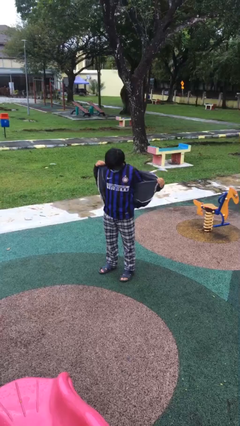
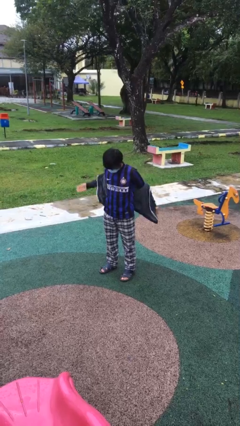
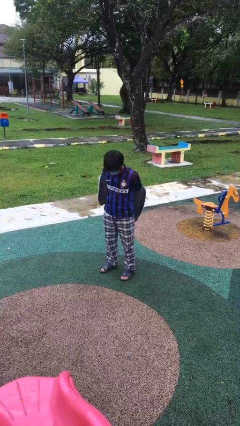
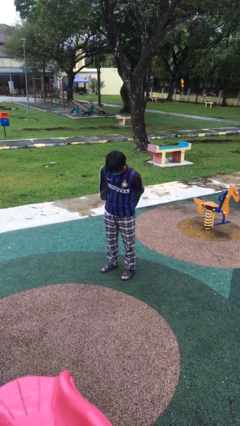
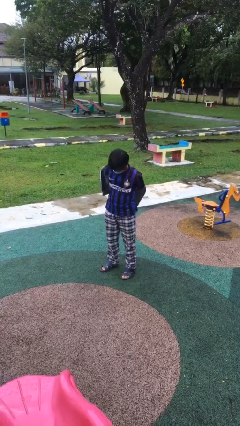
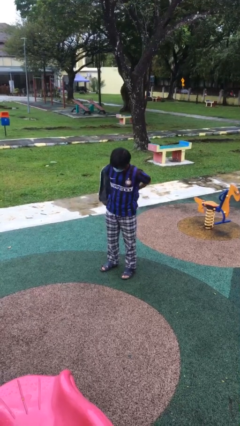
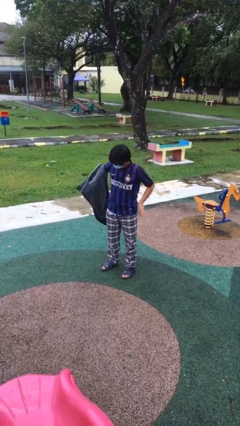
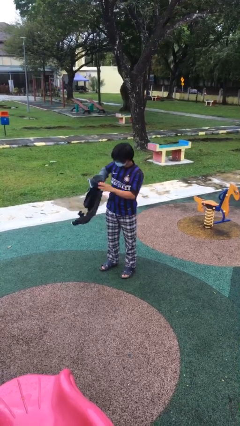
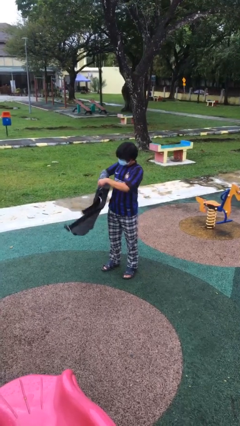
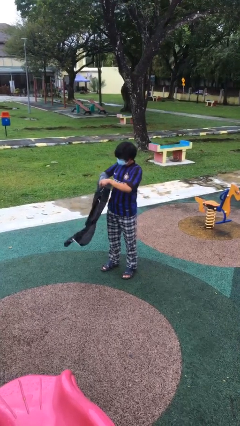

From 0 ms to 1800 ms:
person takes off jacket

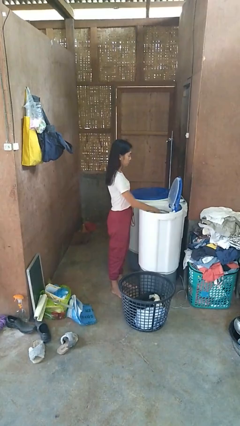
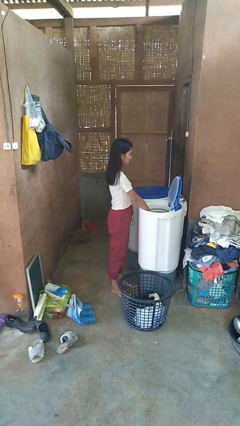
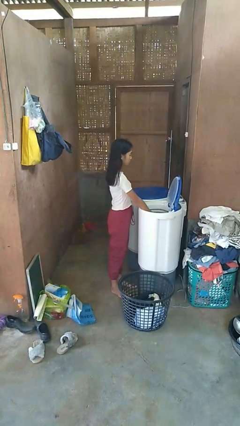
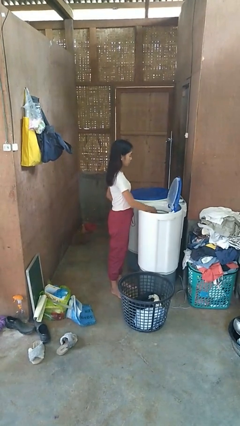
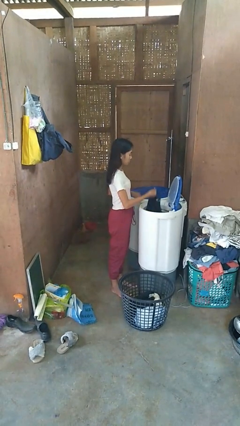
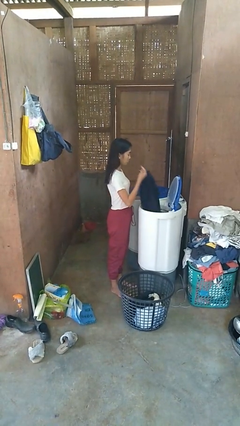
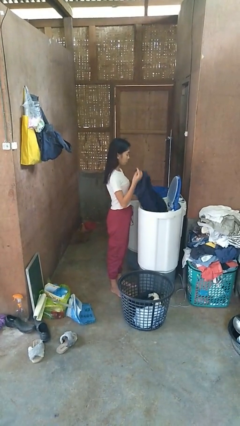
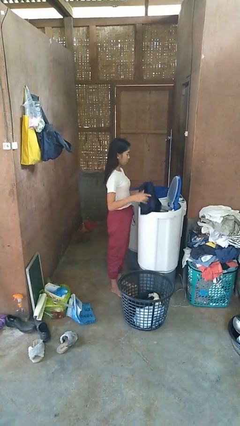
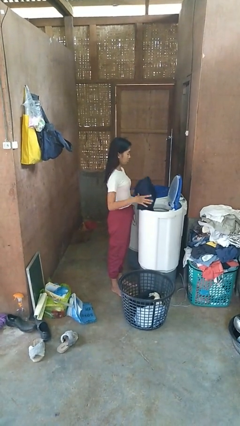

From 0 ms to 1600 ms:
person unloads dryer

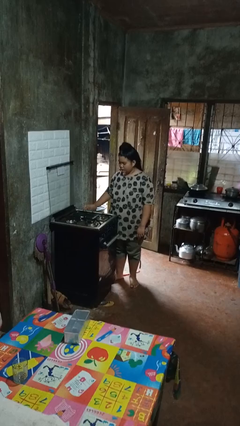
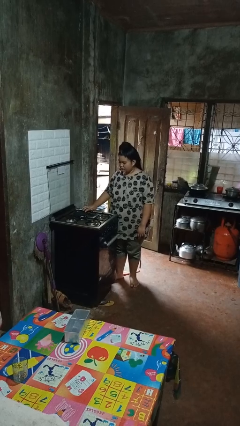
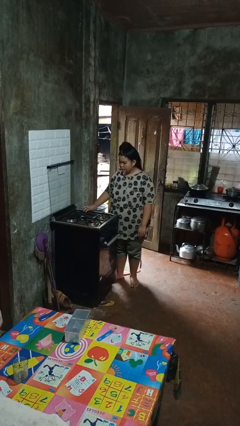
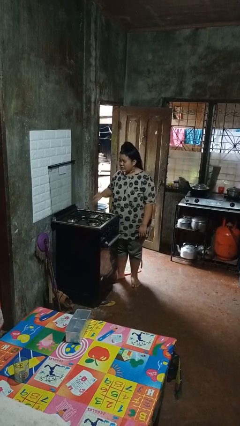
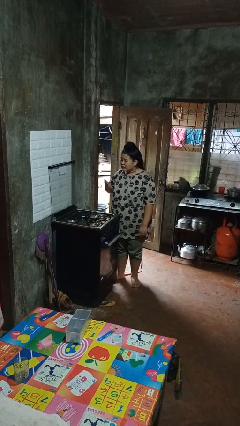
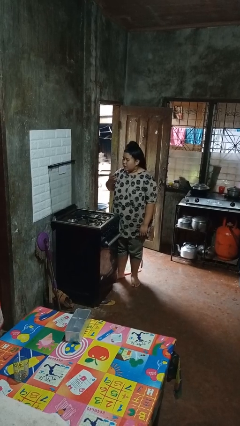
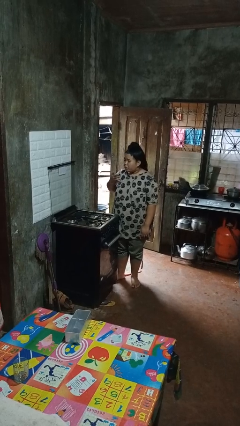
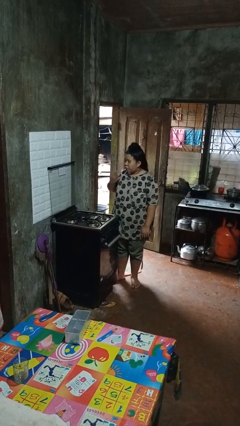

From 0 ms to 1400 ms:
person burns hand

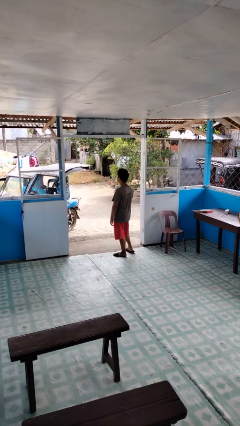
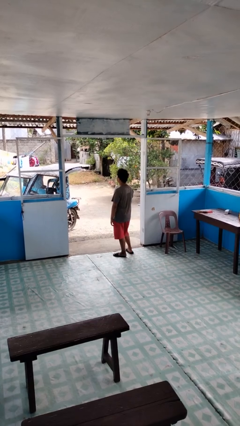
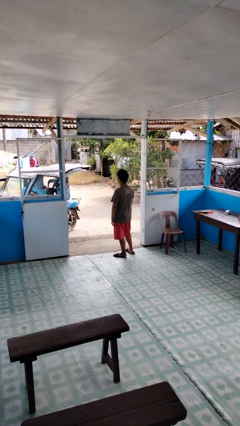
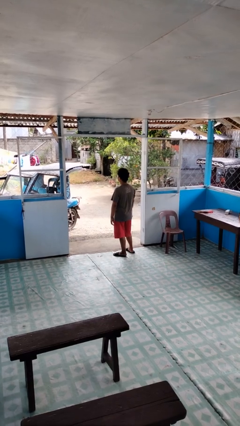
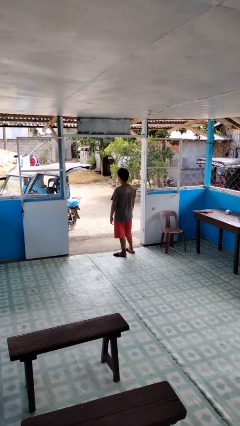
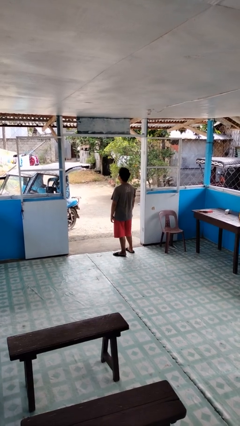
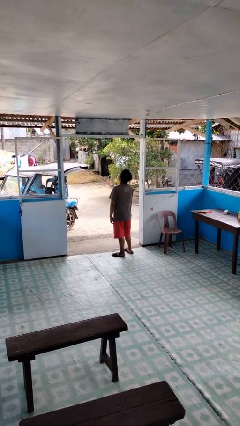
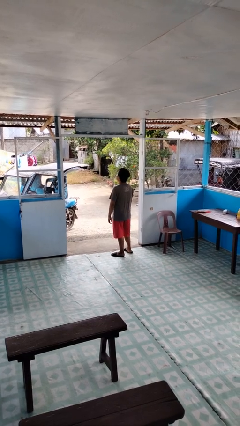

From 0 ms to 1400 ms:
person nods head

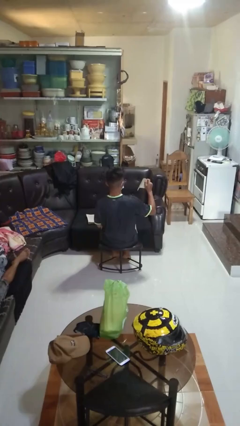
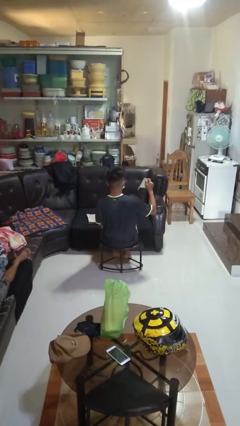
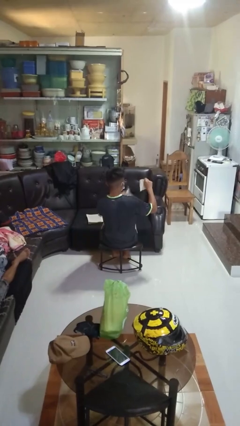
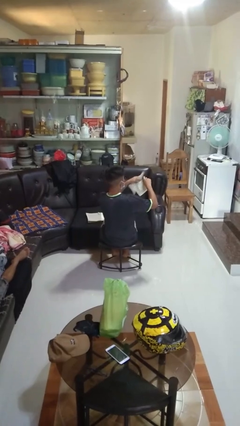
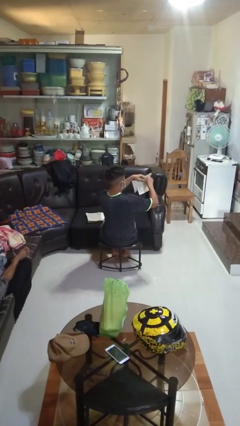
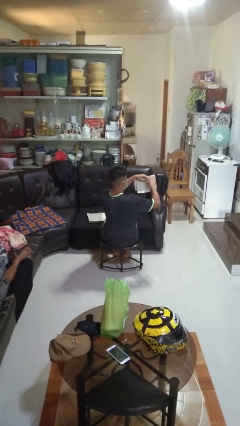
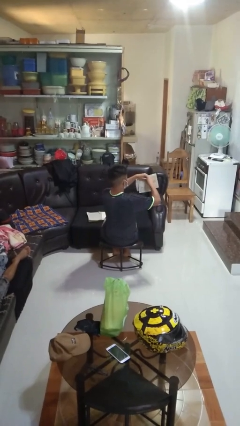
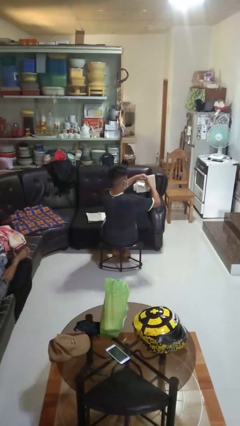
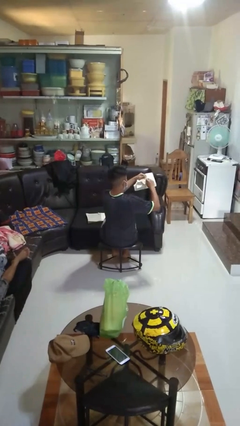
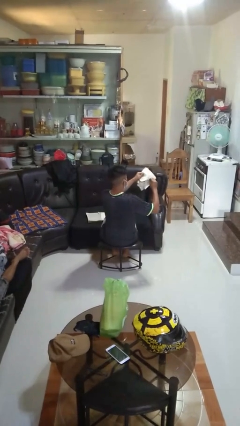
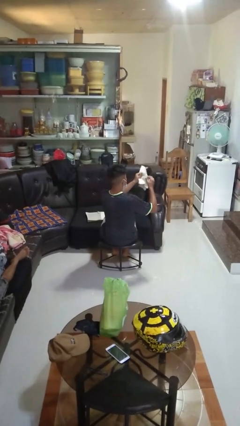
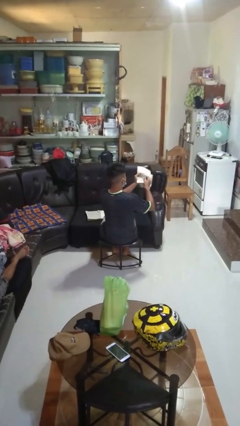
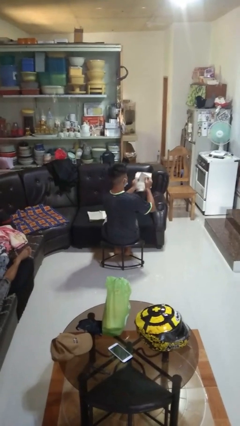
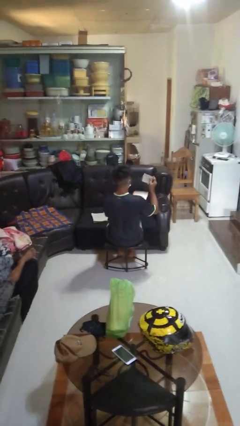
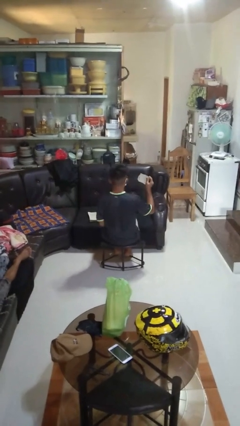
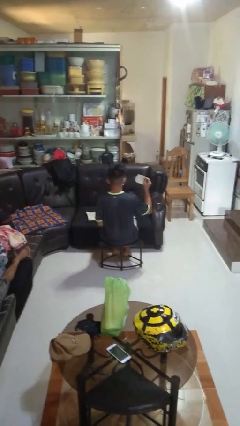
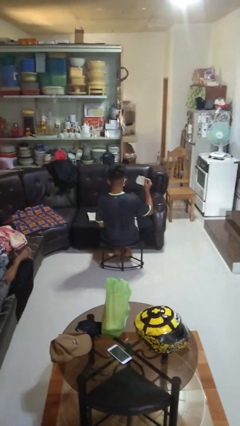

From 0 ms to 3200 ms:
person tears paper

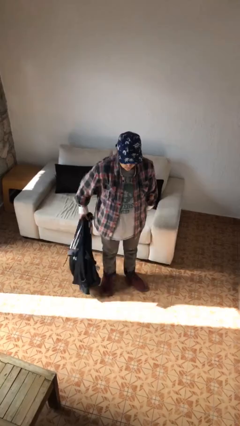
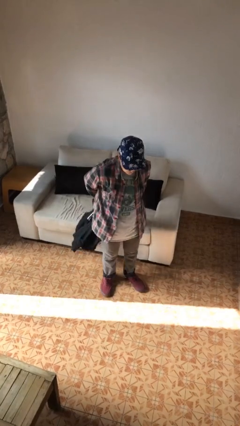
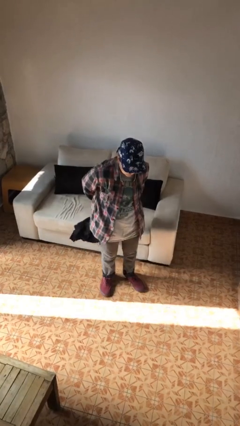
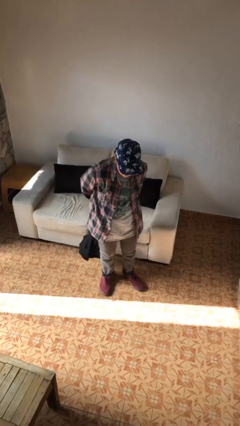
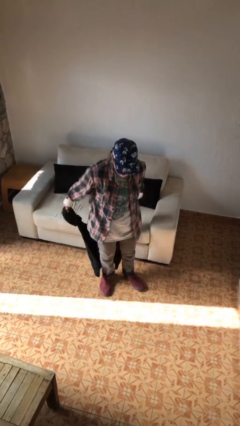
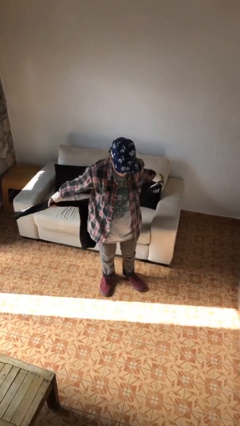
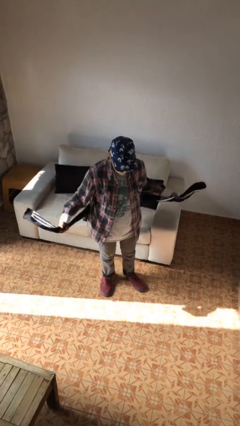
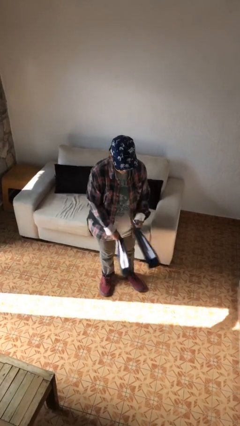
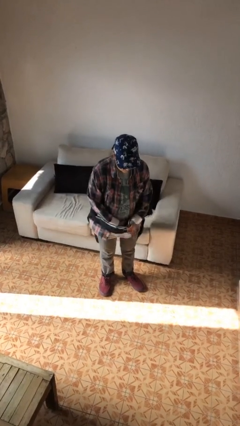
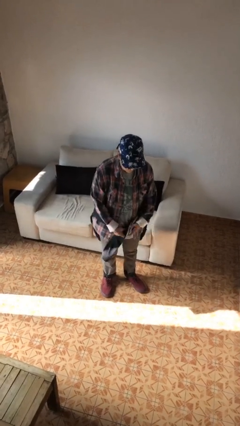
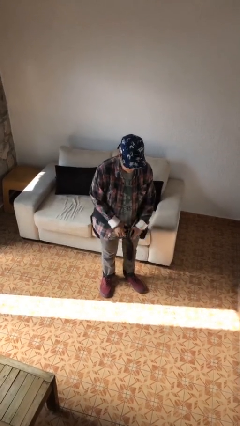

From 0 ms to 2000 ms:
person ties jacket around waist

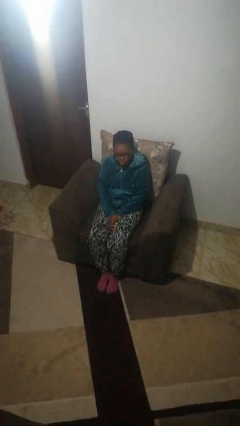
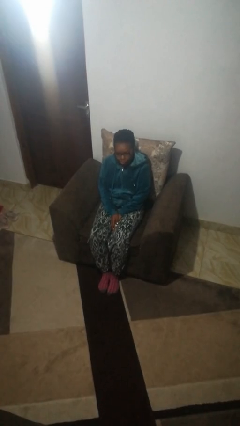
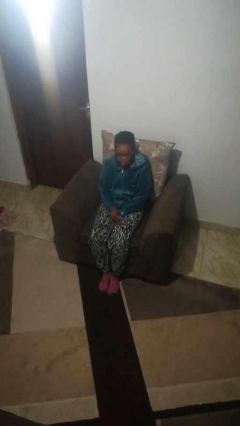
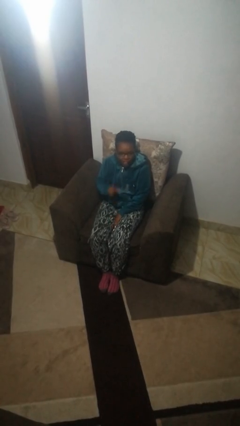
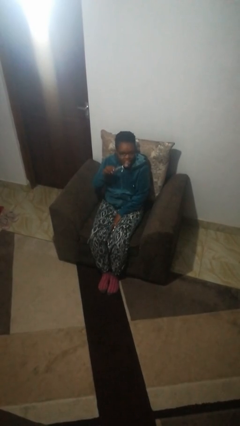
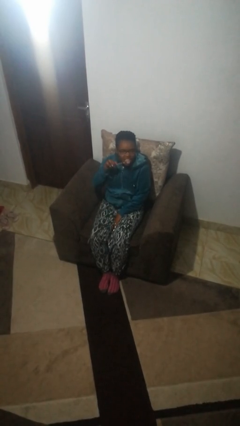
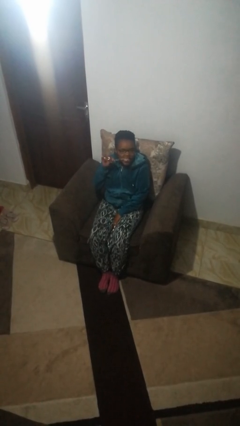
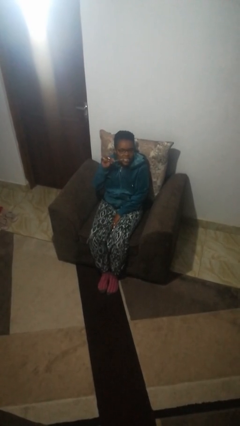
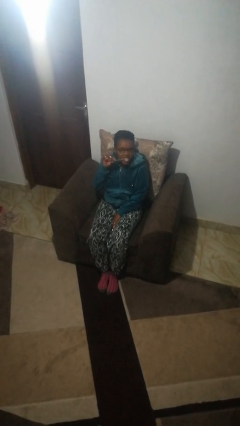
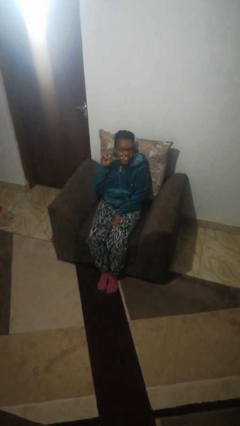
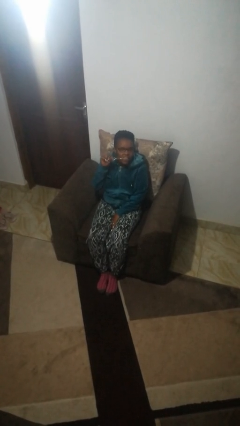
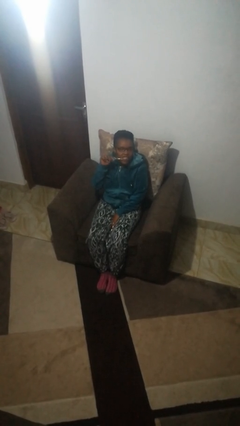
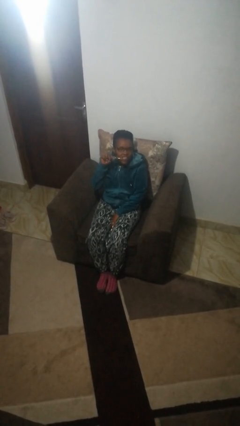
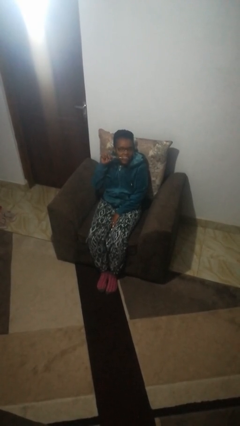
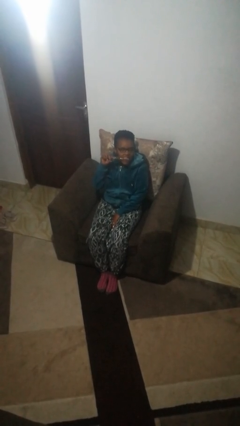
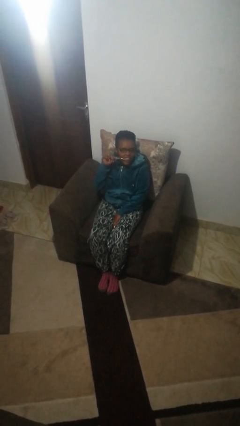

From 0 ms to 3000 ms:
person brushes teeth

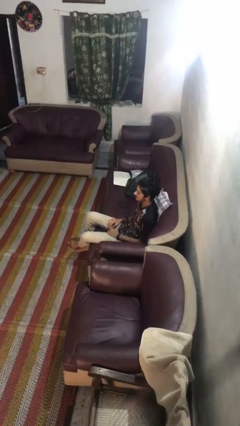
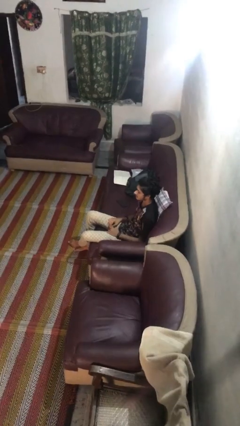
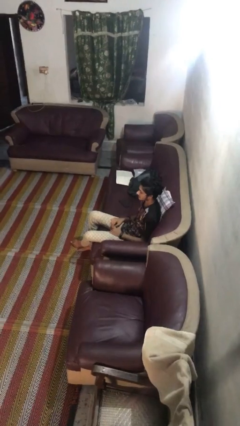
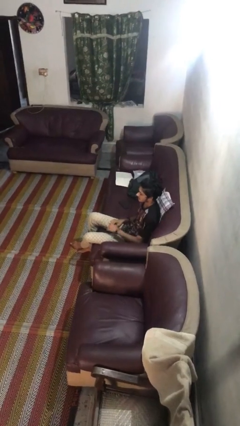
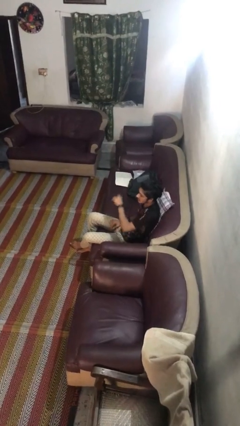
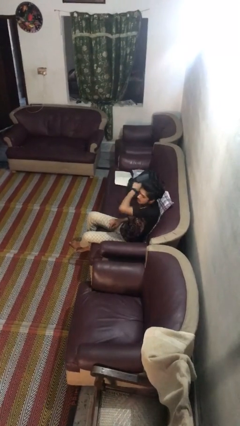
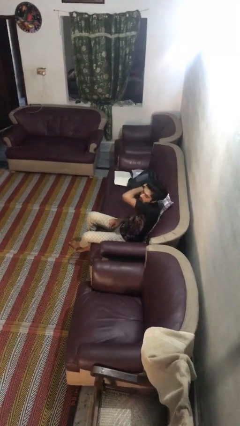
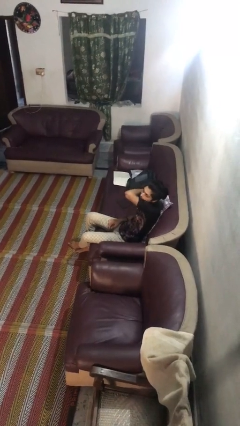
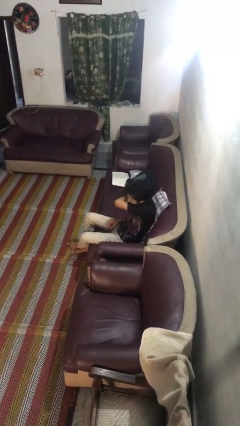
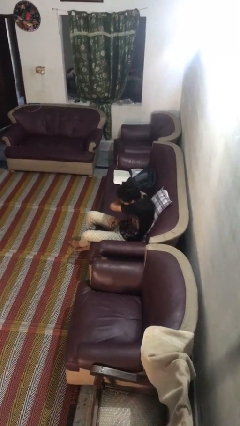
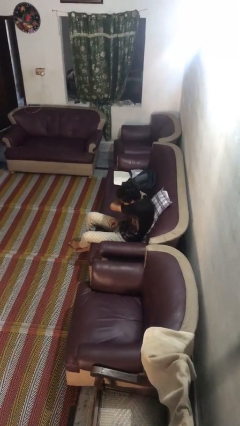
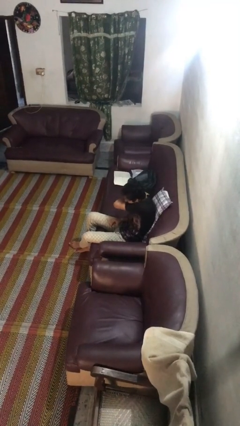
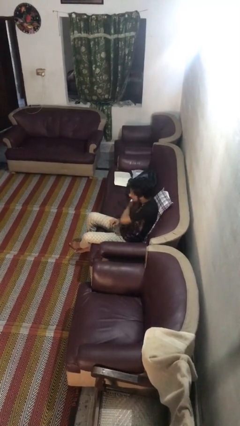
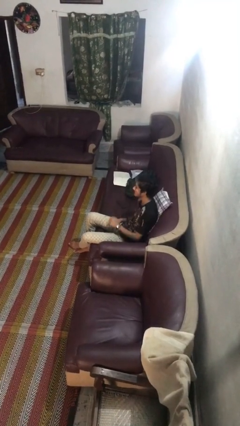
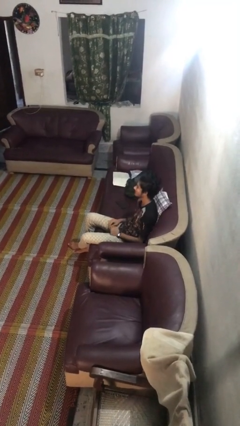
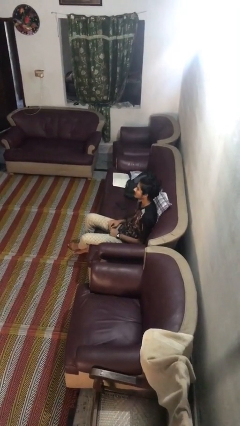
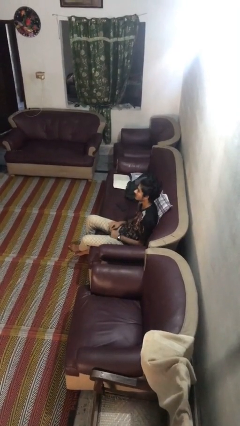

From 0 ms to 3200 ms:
person sneezes into arm
